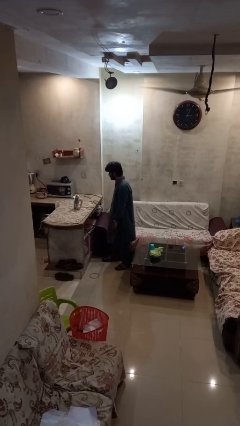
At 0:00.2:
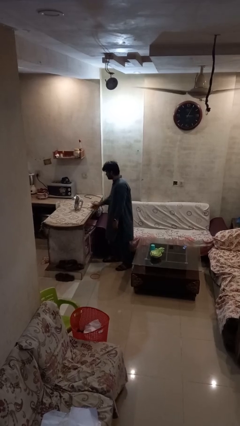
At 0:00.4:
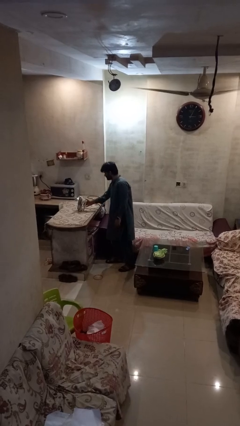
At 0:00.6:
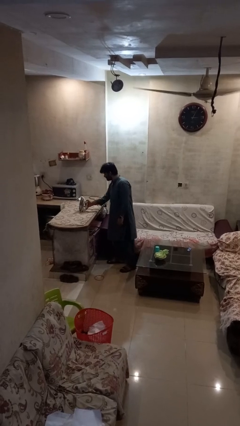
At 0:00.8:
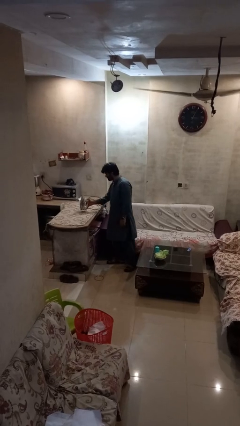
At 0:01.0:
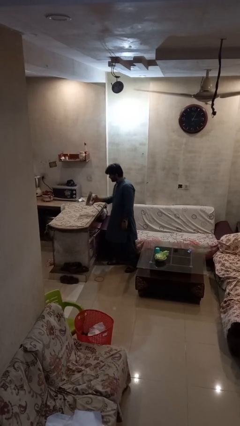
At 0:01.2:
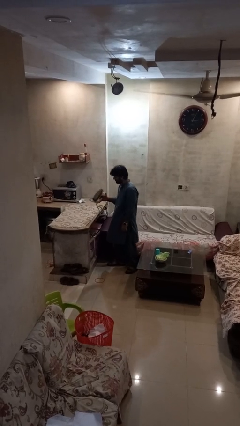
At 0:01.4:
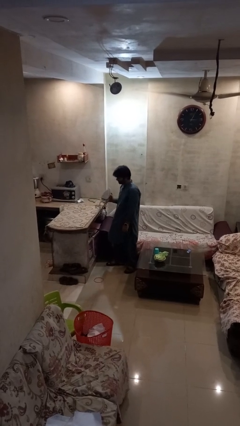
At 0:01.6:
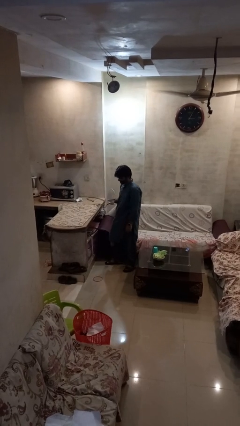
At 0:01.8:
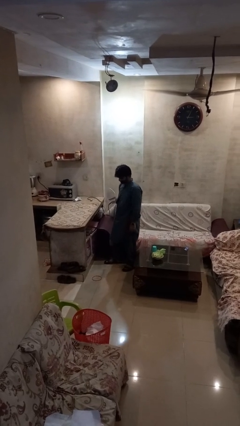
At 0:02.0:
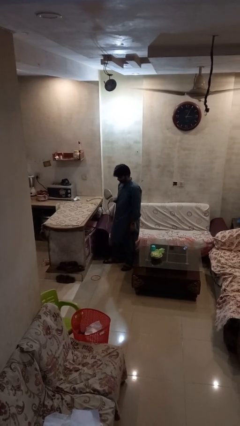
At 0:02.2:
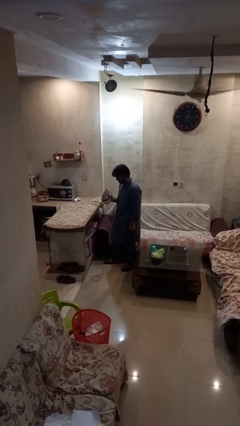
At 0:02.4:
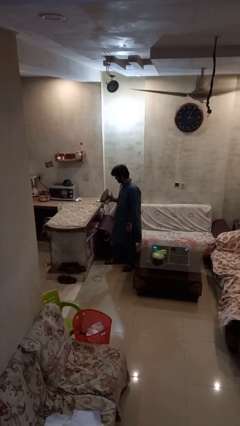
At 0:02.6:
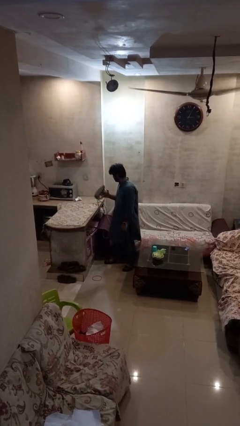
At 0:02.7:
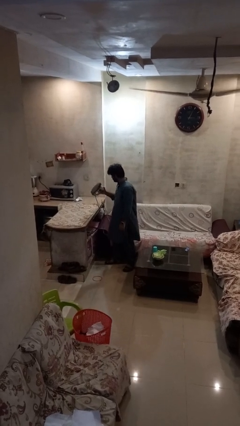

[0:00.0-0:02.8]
person picks up object from countertop

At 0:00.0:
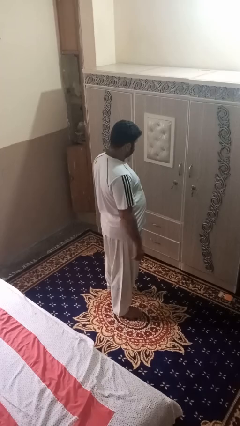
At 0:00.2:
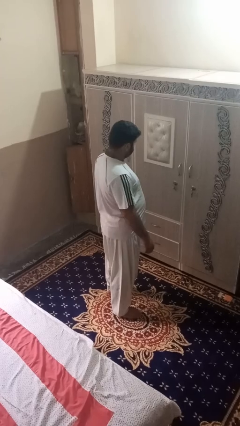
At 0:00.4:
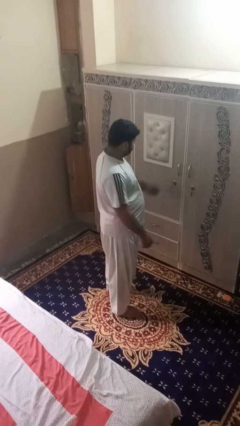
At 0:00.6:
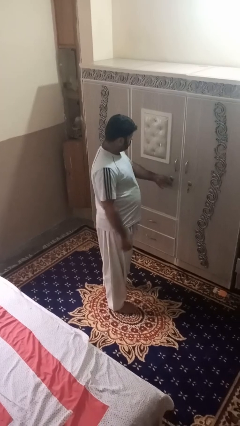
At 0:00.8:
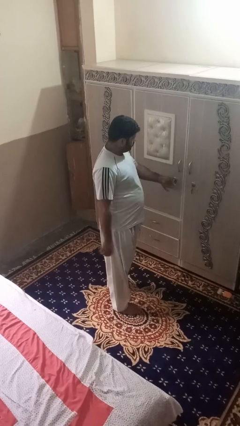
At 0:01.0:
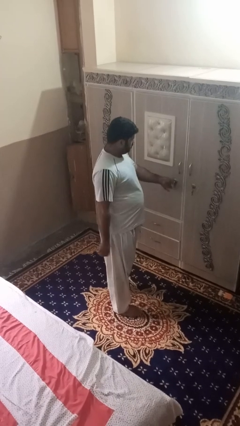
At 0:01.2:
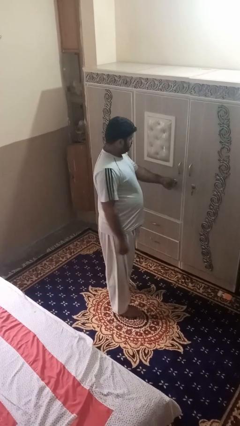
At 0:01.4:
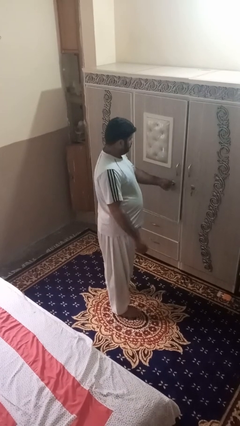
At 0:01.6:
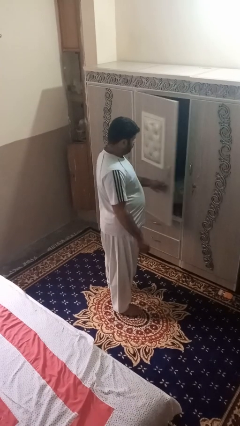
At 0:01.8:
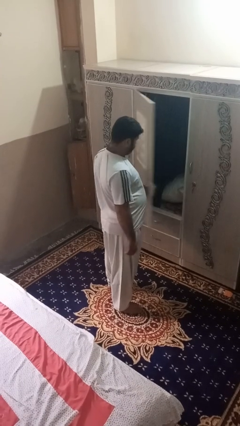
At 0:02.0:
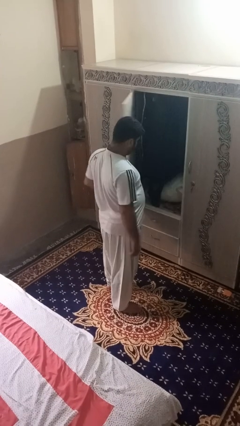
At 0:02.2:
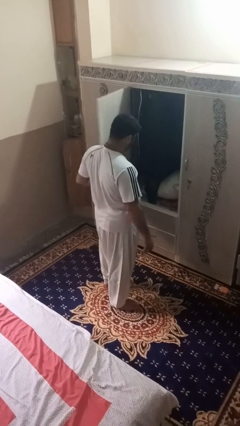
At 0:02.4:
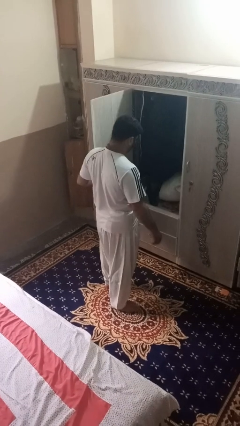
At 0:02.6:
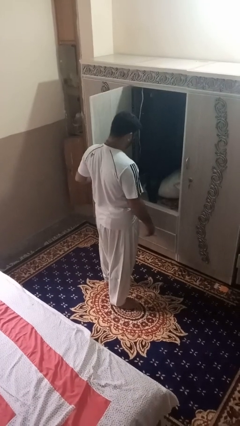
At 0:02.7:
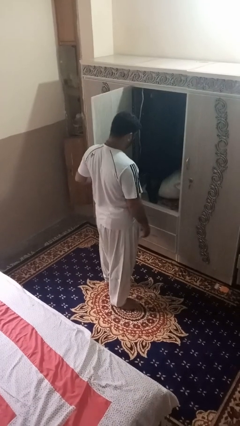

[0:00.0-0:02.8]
person opens dresser drawer

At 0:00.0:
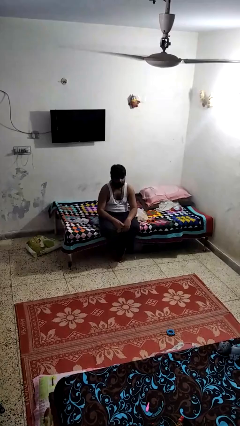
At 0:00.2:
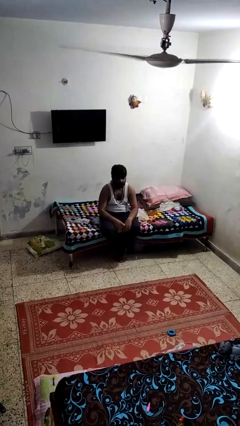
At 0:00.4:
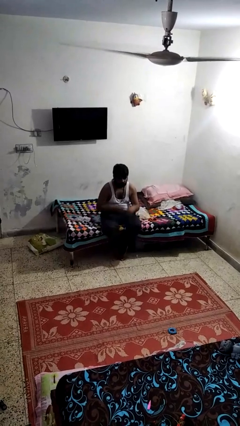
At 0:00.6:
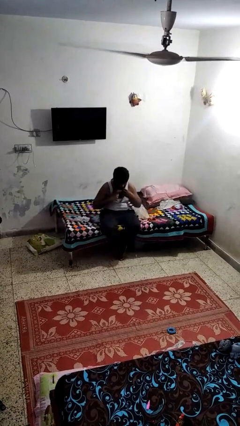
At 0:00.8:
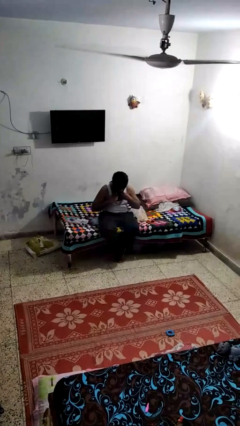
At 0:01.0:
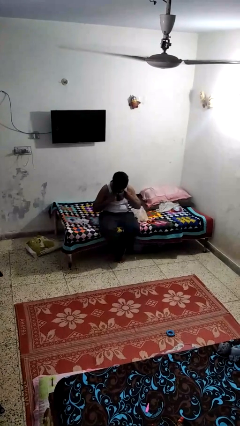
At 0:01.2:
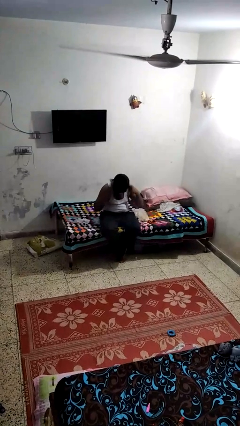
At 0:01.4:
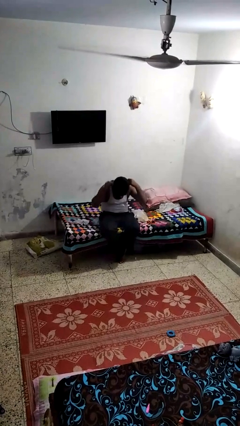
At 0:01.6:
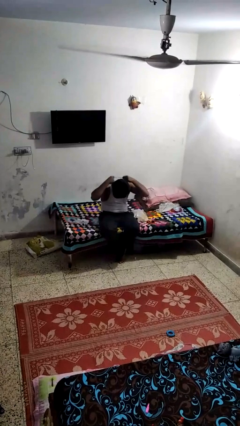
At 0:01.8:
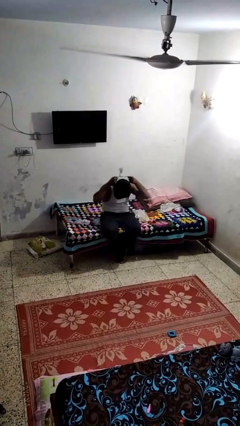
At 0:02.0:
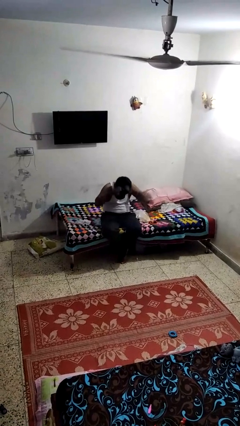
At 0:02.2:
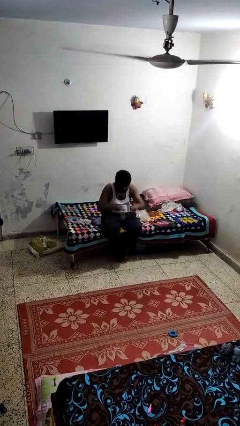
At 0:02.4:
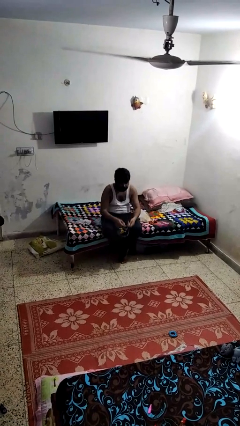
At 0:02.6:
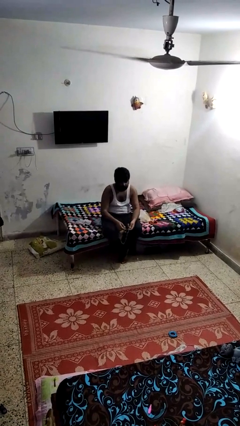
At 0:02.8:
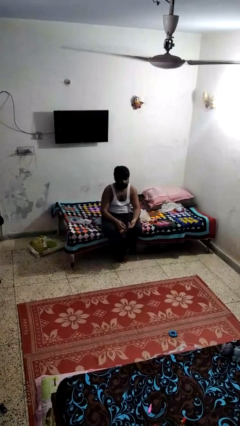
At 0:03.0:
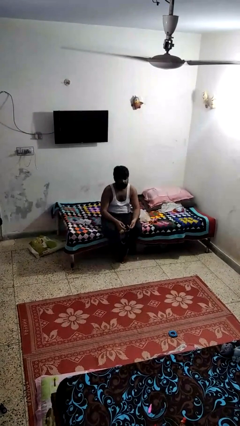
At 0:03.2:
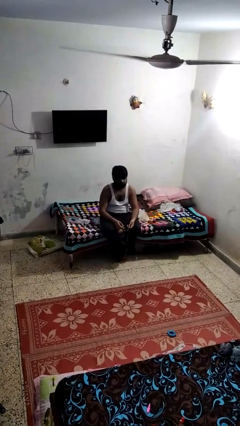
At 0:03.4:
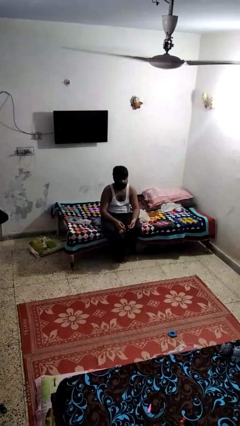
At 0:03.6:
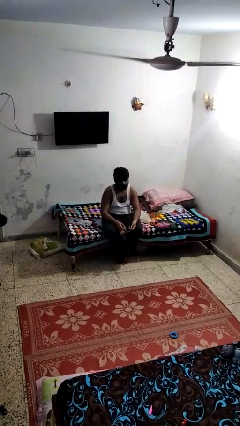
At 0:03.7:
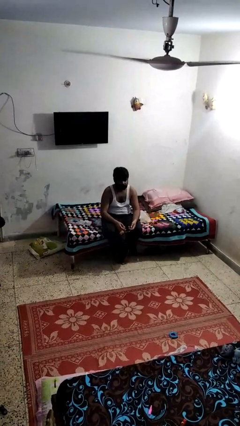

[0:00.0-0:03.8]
person takes off necklace

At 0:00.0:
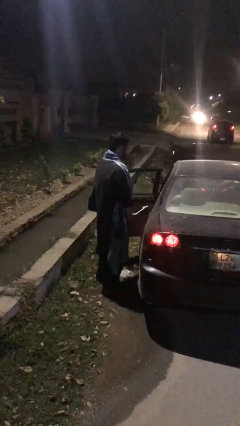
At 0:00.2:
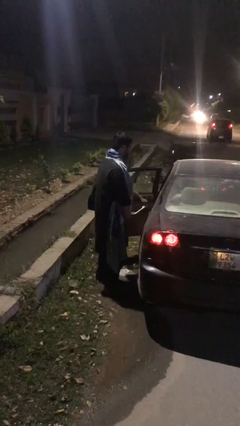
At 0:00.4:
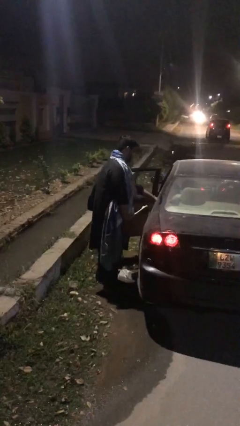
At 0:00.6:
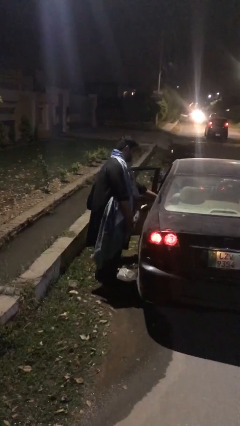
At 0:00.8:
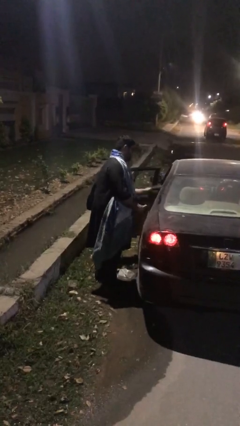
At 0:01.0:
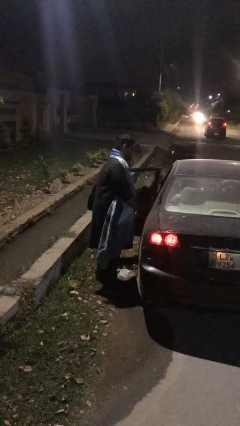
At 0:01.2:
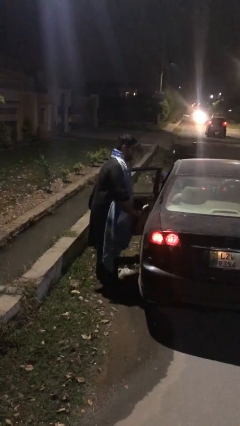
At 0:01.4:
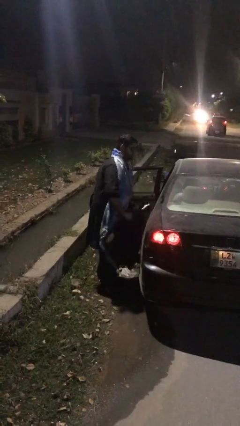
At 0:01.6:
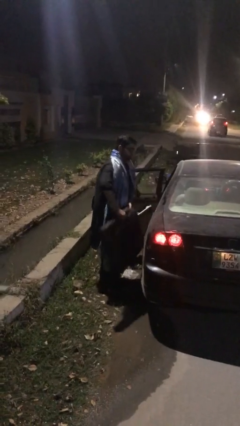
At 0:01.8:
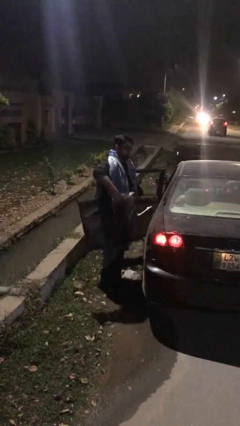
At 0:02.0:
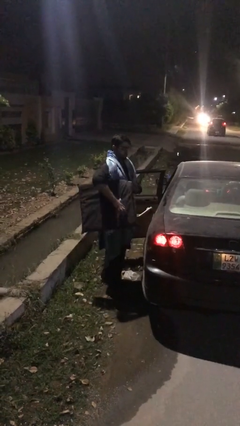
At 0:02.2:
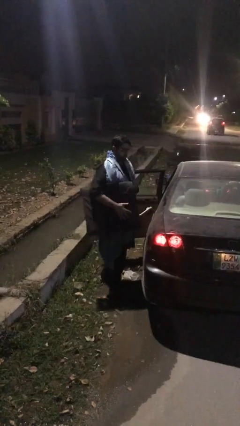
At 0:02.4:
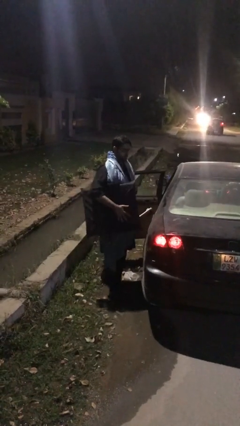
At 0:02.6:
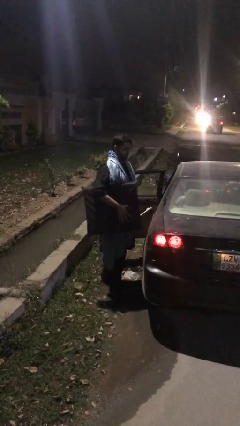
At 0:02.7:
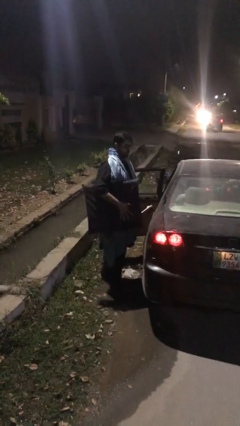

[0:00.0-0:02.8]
person unloads car

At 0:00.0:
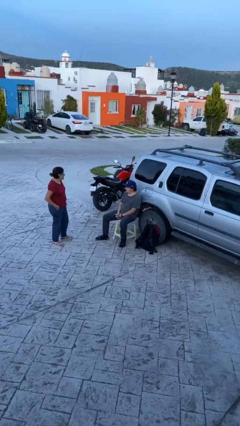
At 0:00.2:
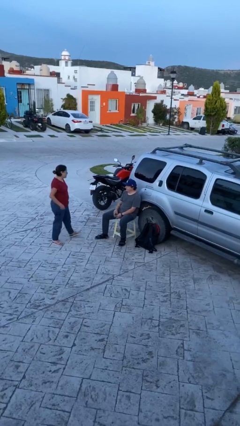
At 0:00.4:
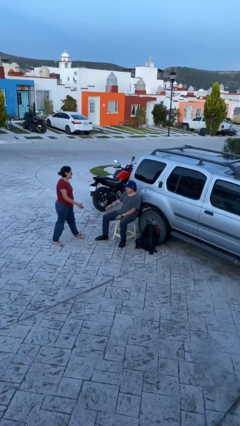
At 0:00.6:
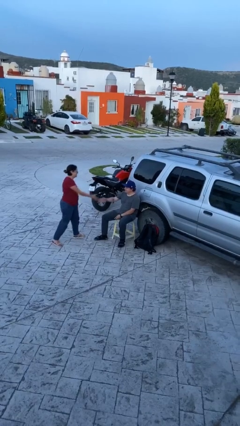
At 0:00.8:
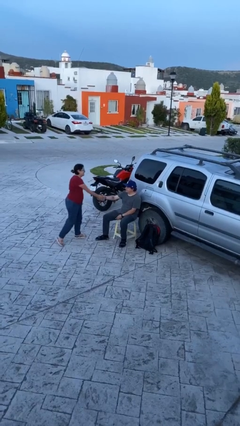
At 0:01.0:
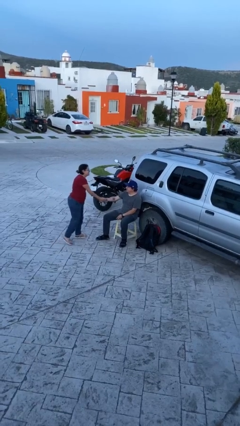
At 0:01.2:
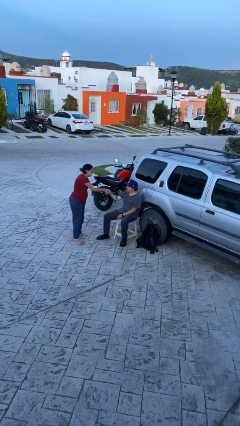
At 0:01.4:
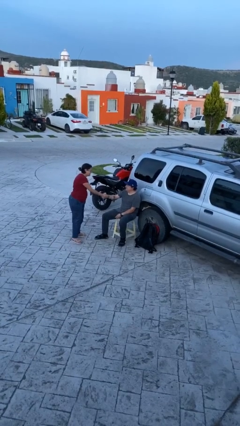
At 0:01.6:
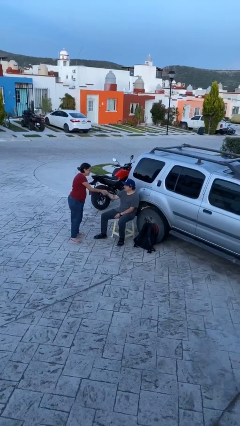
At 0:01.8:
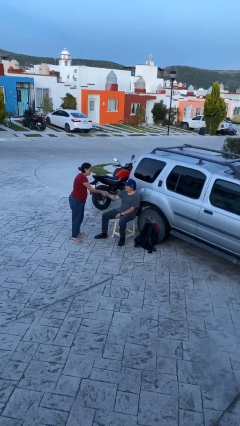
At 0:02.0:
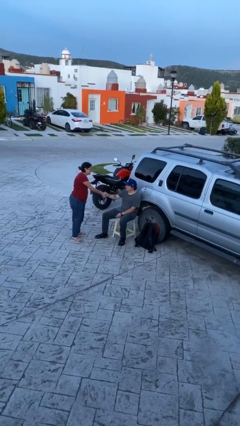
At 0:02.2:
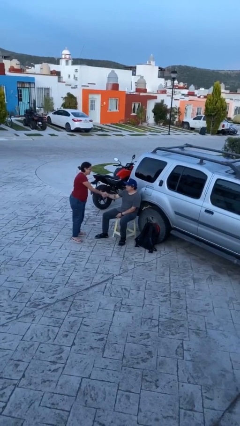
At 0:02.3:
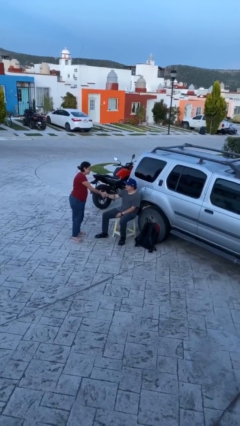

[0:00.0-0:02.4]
person shakes hand

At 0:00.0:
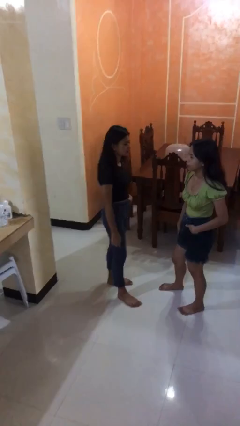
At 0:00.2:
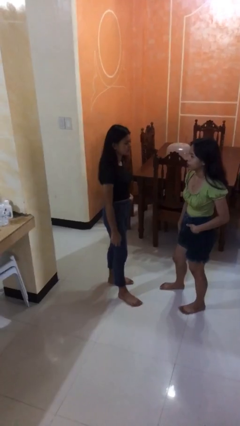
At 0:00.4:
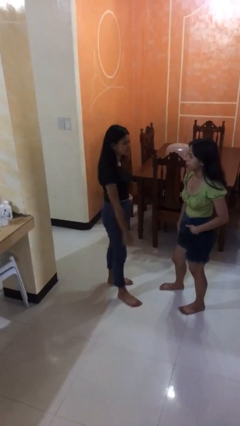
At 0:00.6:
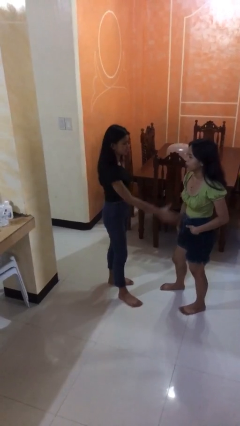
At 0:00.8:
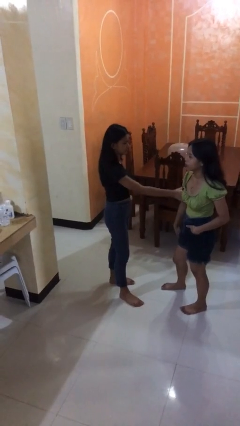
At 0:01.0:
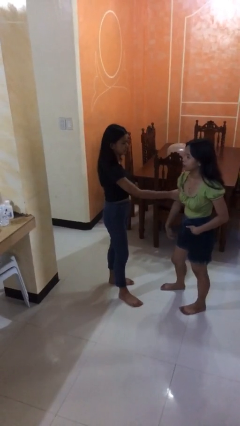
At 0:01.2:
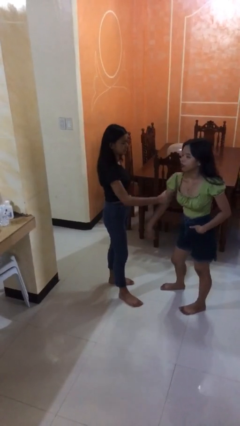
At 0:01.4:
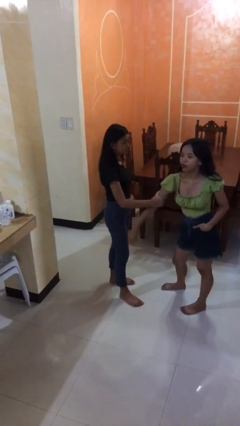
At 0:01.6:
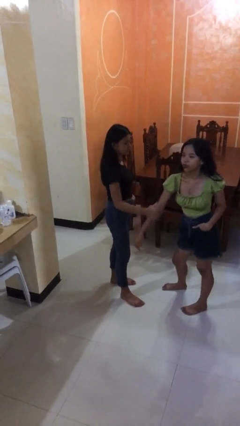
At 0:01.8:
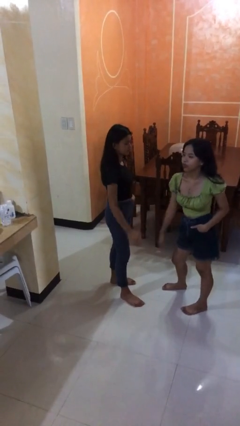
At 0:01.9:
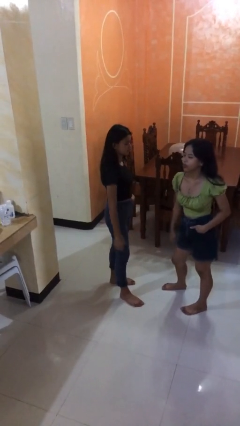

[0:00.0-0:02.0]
person grabs person by bicep

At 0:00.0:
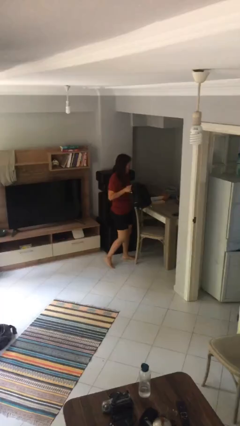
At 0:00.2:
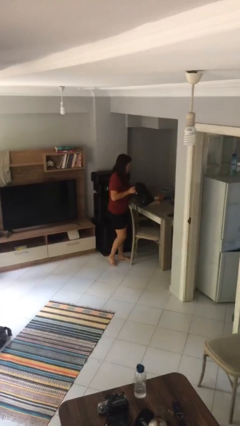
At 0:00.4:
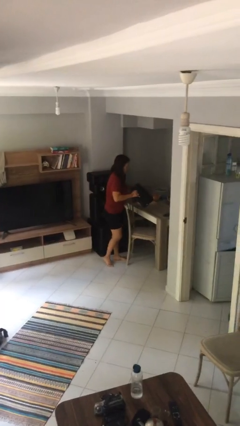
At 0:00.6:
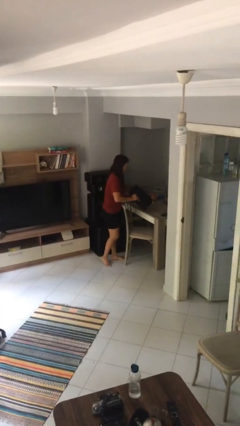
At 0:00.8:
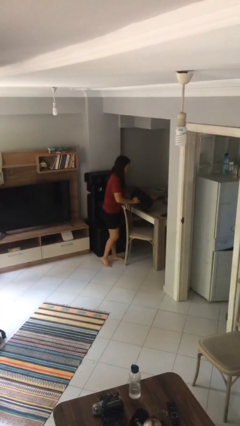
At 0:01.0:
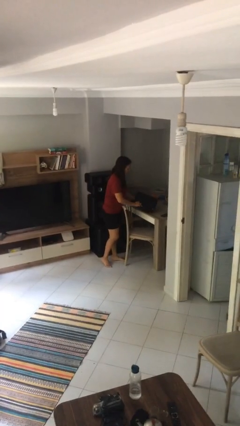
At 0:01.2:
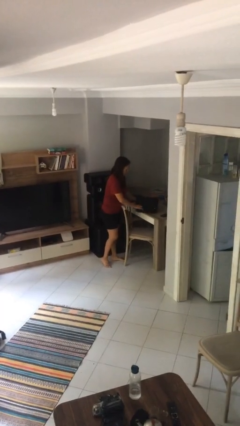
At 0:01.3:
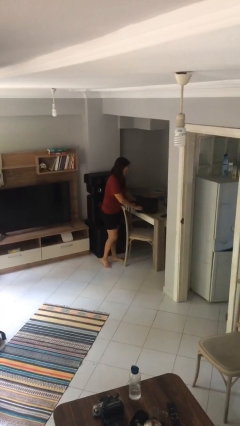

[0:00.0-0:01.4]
person puts down object on table
